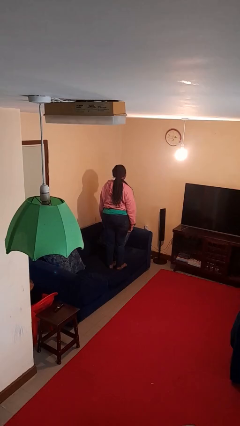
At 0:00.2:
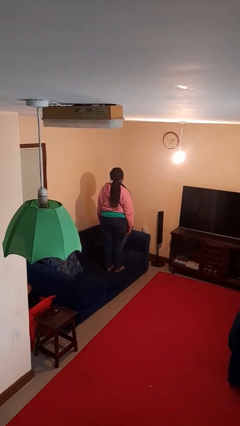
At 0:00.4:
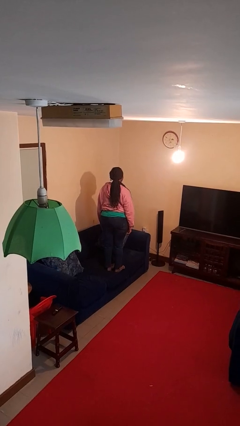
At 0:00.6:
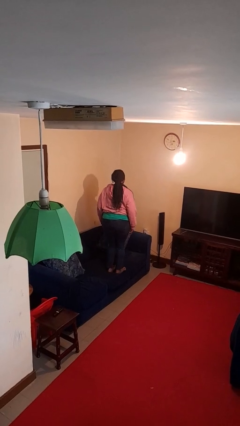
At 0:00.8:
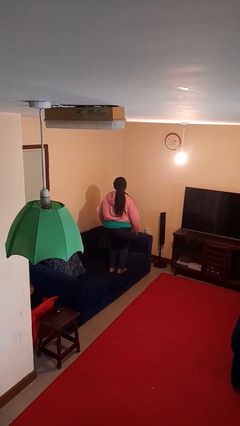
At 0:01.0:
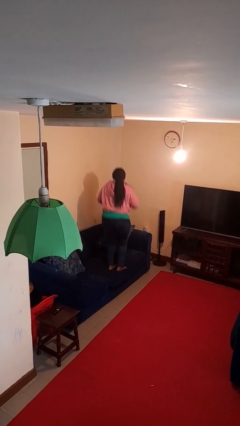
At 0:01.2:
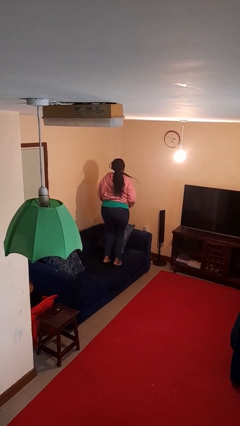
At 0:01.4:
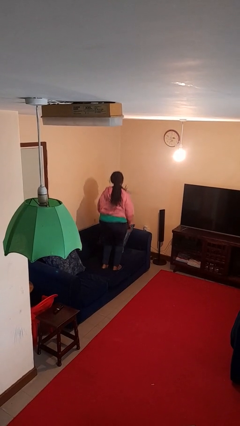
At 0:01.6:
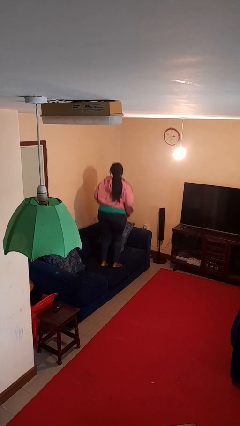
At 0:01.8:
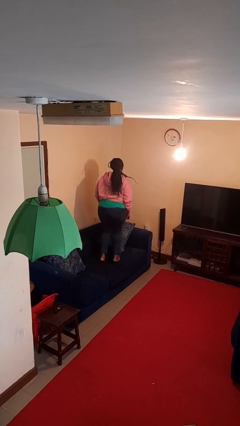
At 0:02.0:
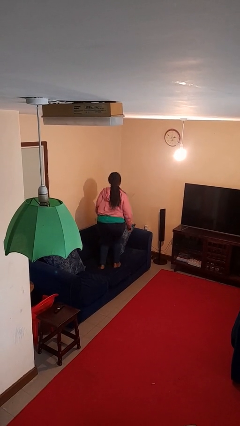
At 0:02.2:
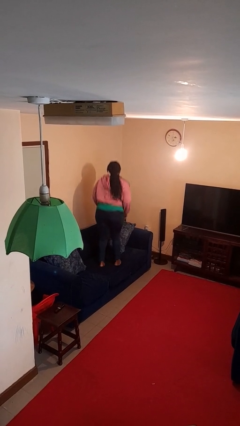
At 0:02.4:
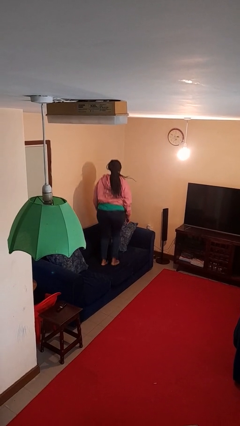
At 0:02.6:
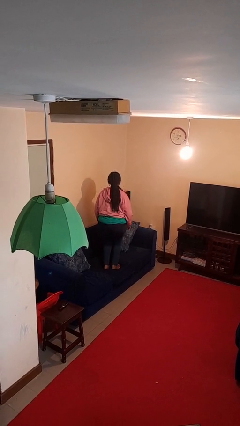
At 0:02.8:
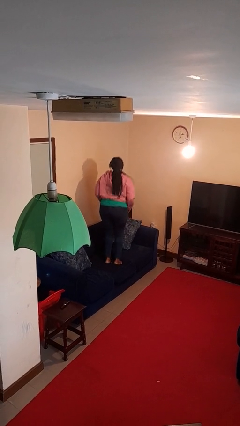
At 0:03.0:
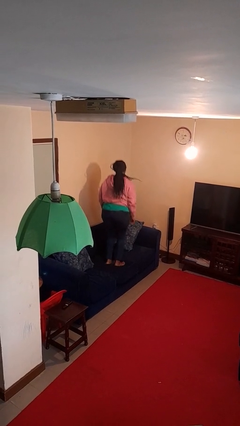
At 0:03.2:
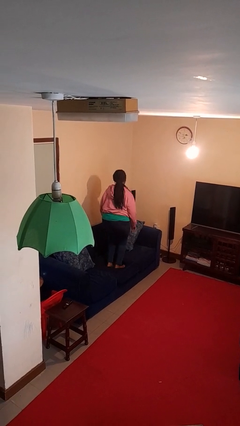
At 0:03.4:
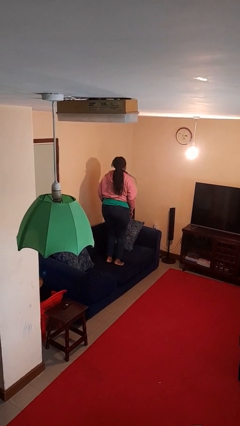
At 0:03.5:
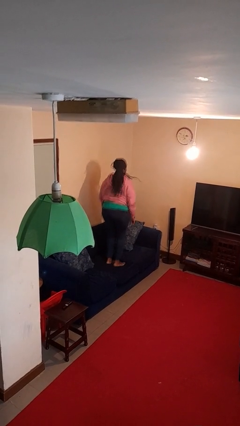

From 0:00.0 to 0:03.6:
person jumps on couch

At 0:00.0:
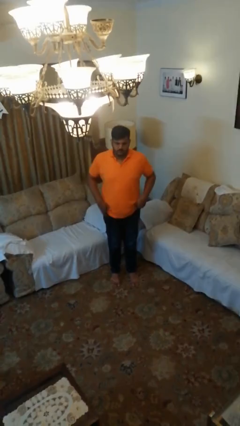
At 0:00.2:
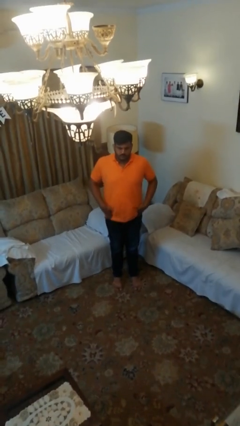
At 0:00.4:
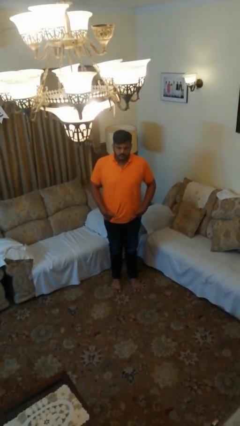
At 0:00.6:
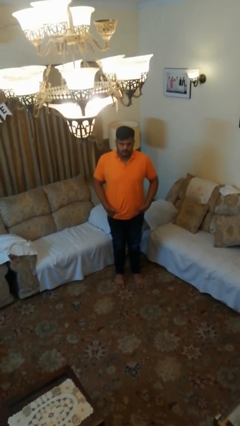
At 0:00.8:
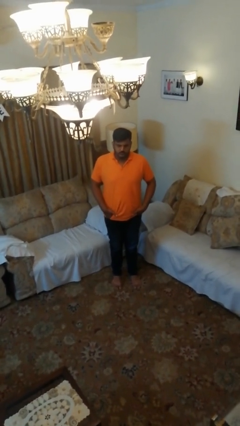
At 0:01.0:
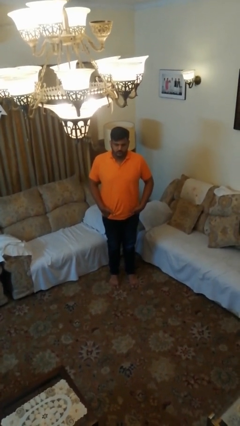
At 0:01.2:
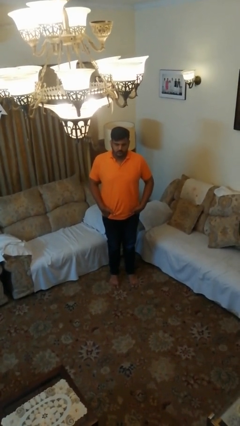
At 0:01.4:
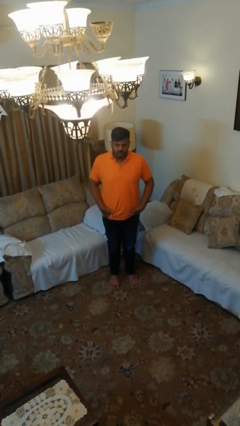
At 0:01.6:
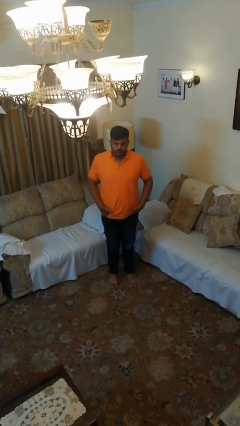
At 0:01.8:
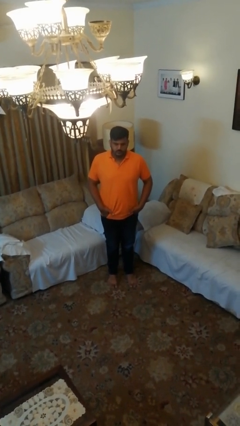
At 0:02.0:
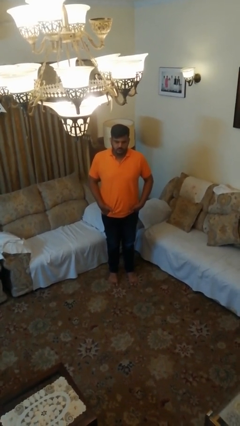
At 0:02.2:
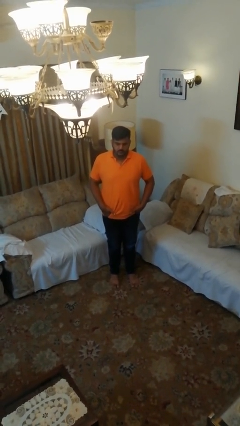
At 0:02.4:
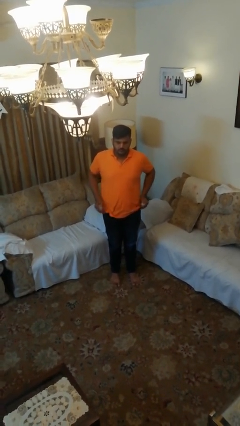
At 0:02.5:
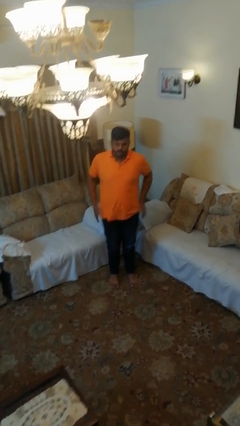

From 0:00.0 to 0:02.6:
person puts hands in back pockets

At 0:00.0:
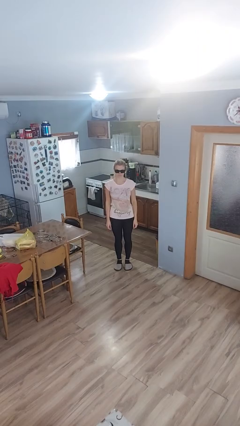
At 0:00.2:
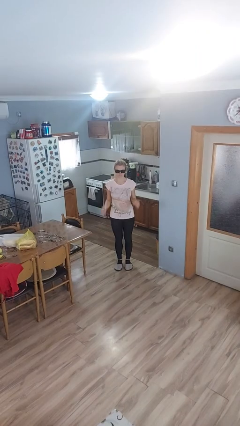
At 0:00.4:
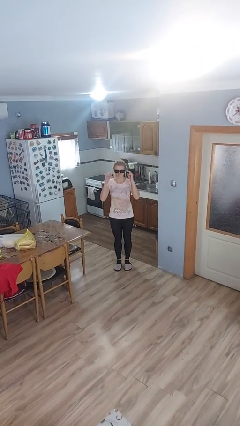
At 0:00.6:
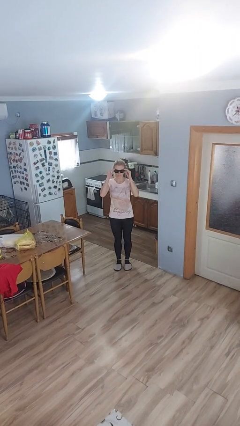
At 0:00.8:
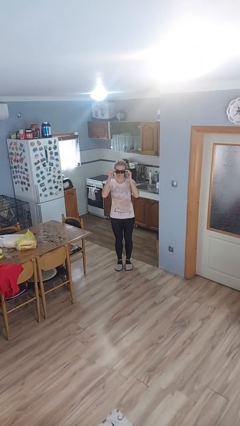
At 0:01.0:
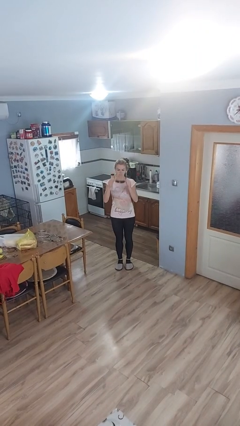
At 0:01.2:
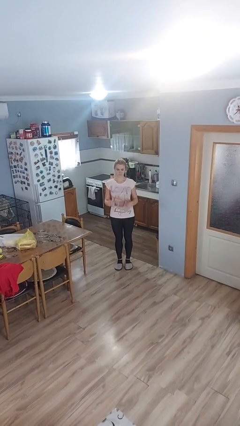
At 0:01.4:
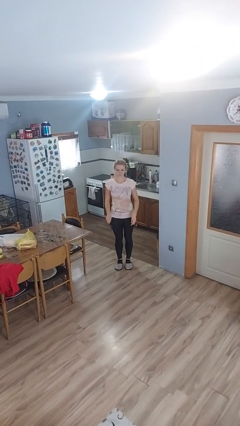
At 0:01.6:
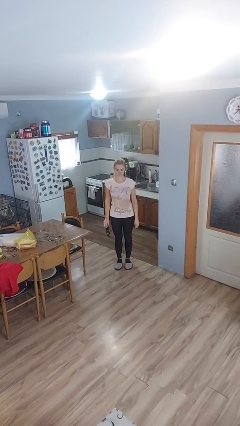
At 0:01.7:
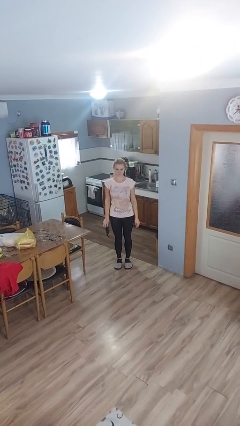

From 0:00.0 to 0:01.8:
person takes off sunglasses

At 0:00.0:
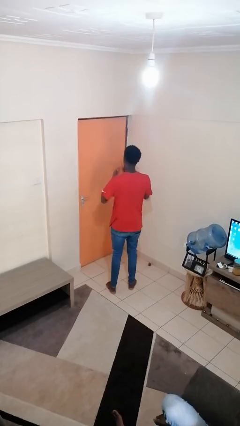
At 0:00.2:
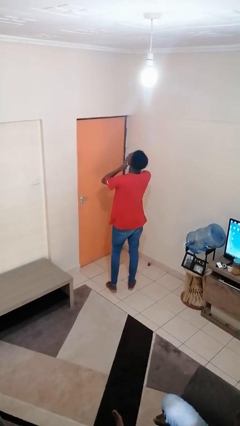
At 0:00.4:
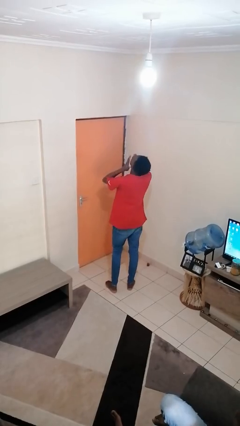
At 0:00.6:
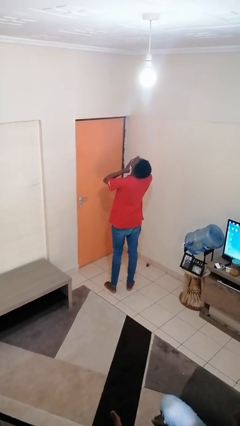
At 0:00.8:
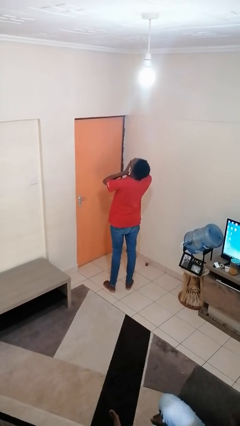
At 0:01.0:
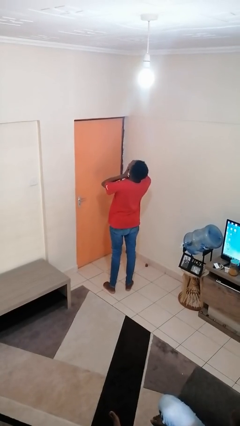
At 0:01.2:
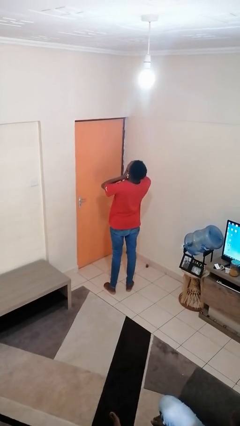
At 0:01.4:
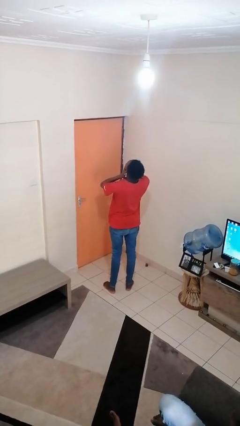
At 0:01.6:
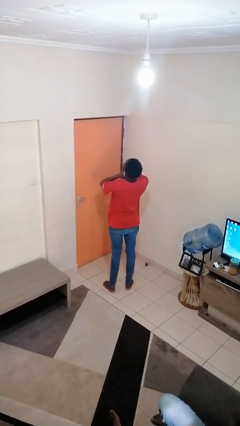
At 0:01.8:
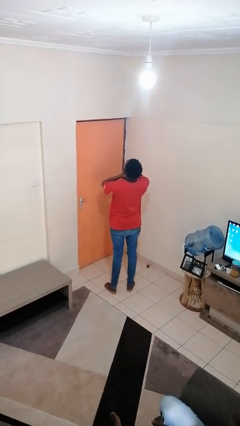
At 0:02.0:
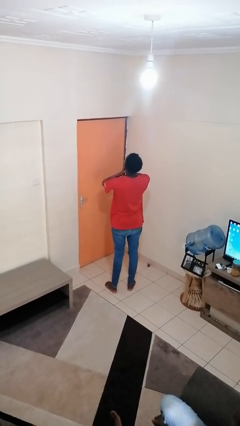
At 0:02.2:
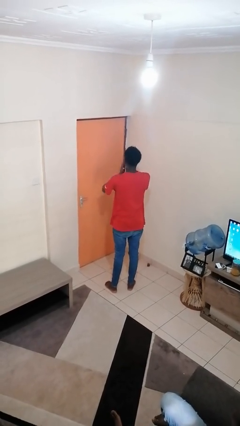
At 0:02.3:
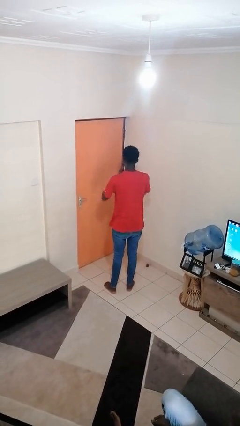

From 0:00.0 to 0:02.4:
person yawns

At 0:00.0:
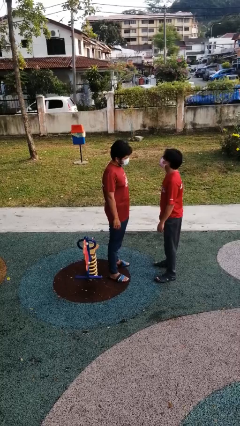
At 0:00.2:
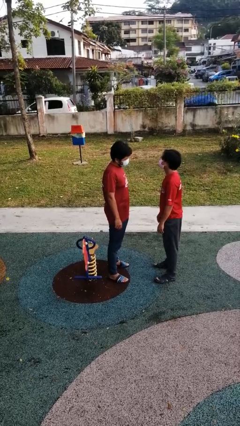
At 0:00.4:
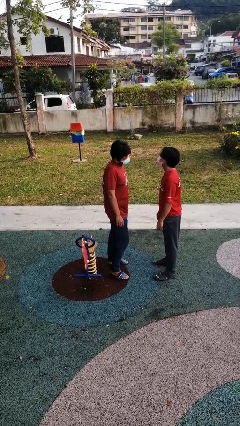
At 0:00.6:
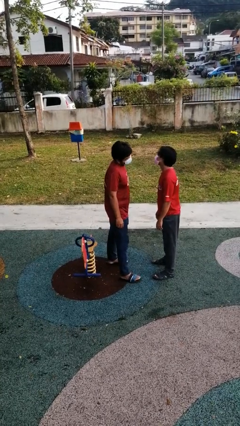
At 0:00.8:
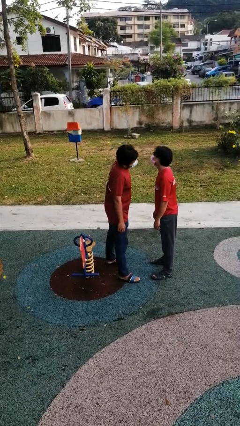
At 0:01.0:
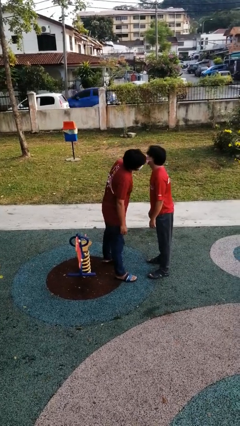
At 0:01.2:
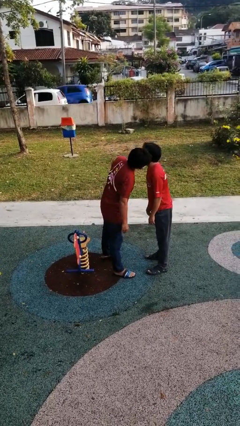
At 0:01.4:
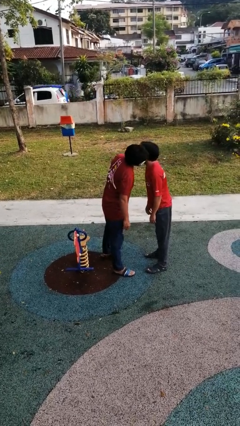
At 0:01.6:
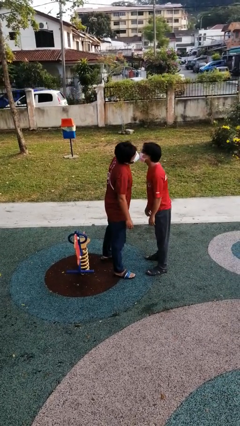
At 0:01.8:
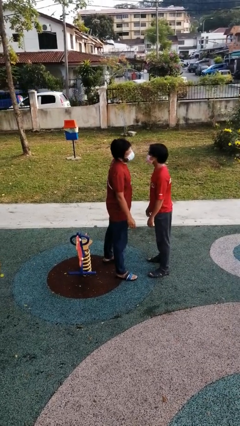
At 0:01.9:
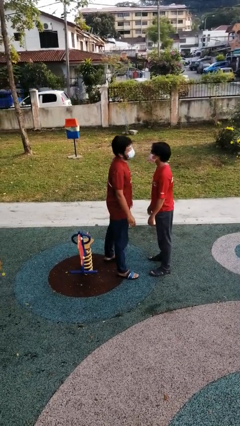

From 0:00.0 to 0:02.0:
person kisses cheek of person

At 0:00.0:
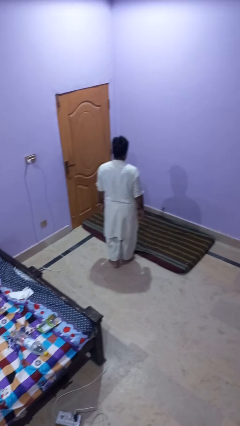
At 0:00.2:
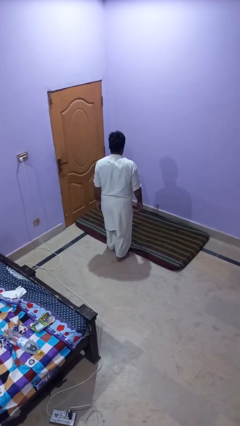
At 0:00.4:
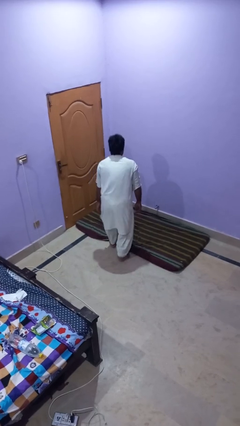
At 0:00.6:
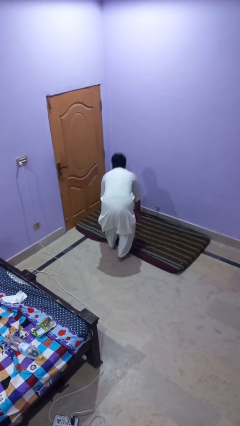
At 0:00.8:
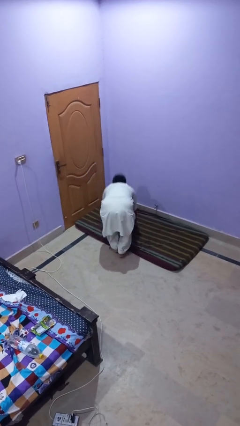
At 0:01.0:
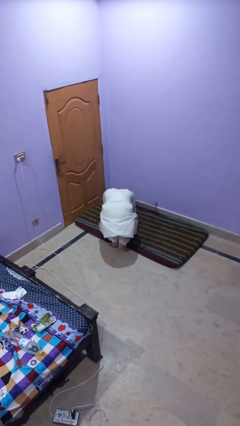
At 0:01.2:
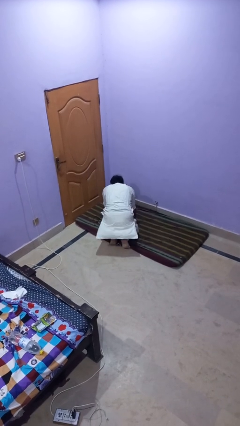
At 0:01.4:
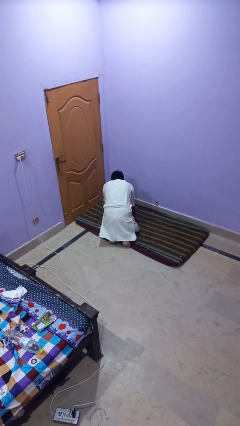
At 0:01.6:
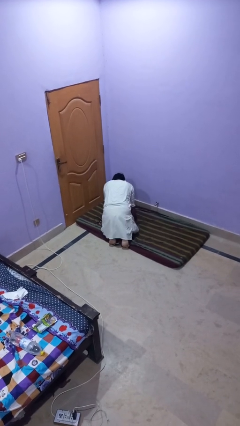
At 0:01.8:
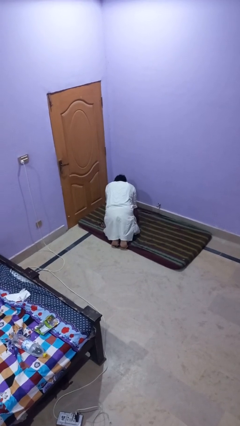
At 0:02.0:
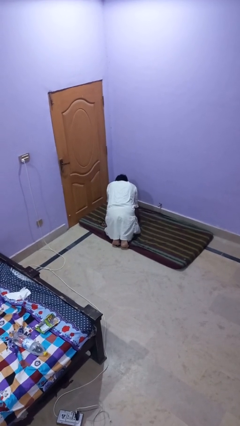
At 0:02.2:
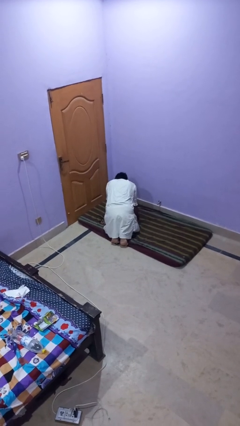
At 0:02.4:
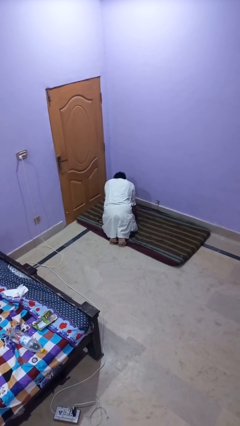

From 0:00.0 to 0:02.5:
person trips on object on floor

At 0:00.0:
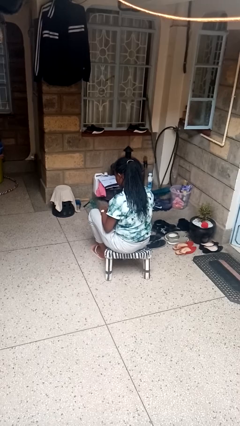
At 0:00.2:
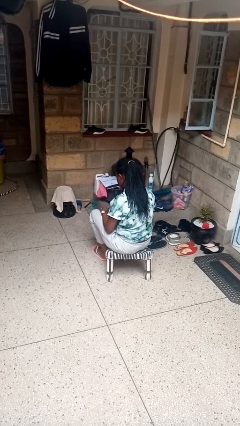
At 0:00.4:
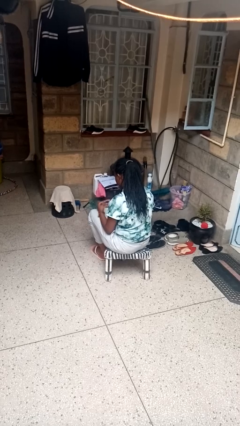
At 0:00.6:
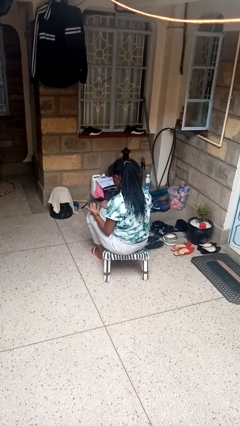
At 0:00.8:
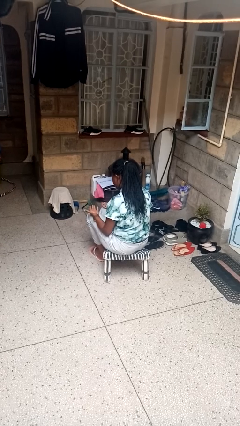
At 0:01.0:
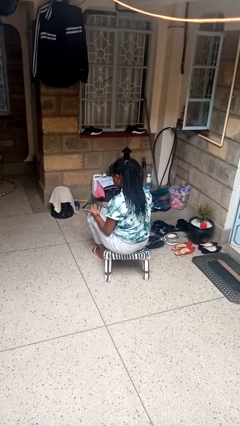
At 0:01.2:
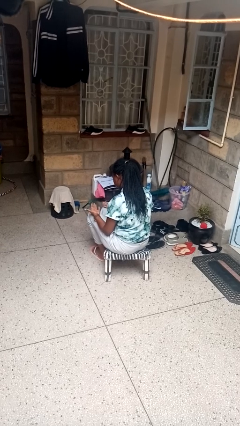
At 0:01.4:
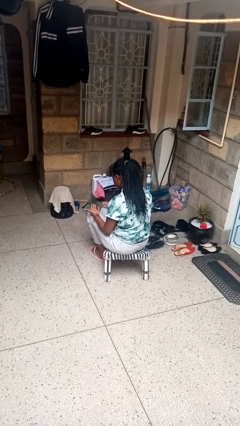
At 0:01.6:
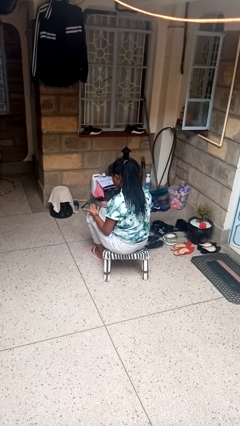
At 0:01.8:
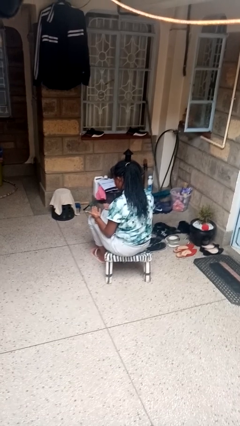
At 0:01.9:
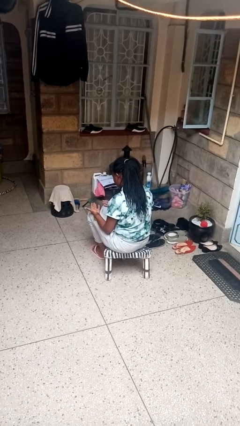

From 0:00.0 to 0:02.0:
person looks at hands in lap

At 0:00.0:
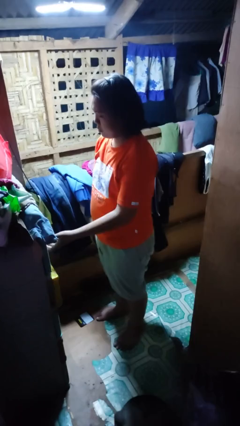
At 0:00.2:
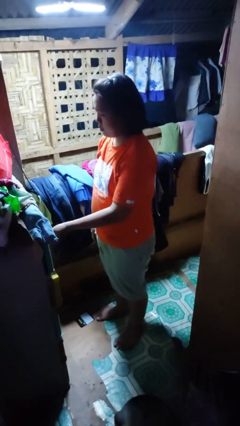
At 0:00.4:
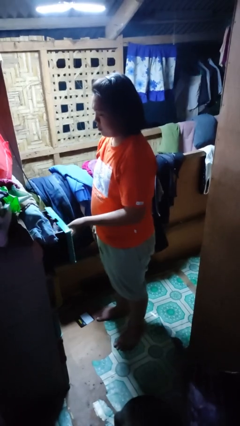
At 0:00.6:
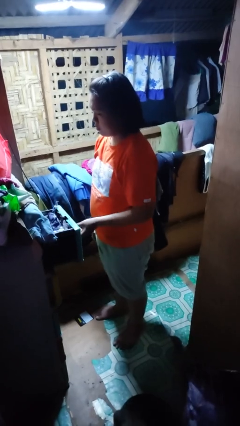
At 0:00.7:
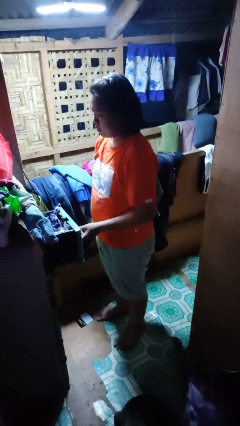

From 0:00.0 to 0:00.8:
person opens dresser drawer
